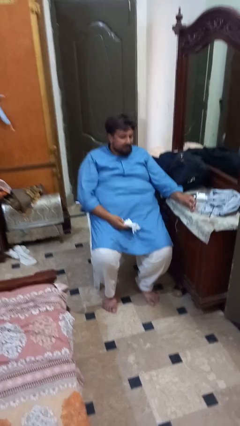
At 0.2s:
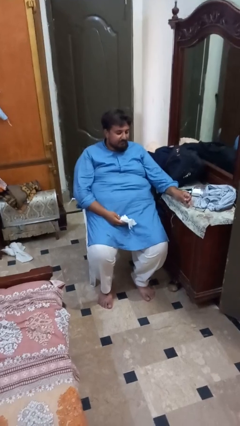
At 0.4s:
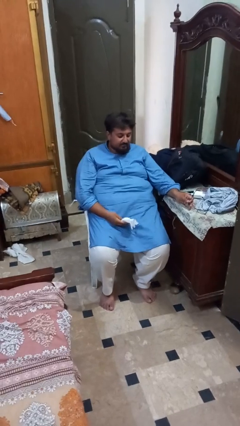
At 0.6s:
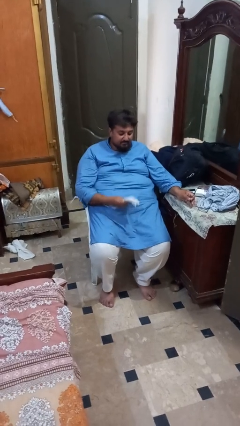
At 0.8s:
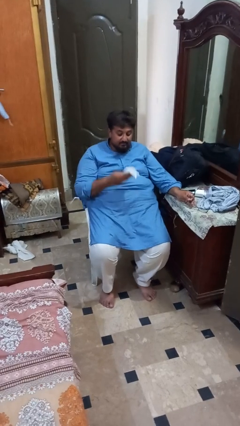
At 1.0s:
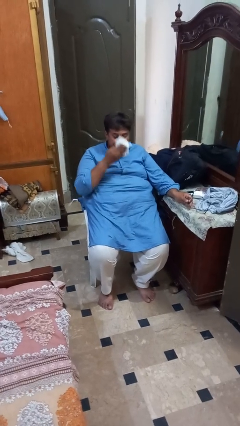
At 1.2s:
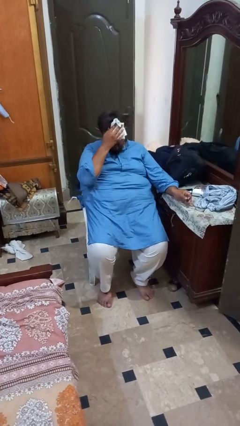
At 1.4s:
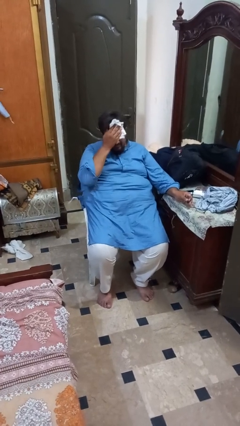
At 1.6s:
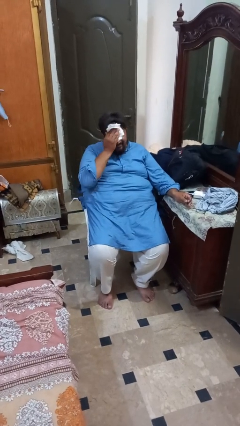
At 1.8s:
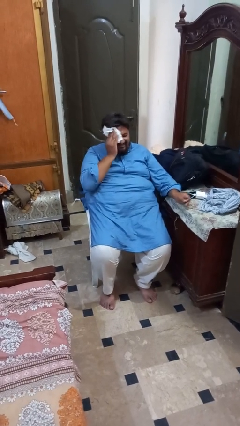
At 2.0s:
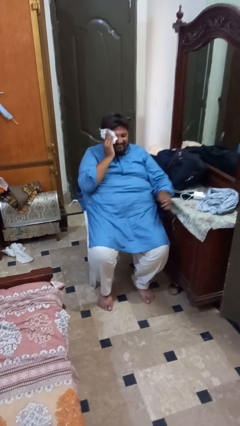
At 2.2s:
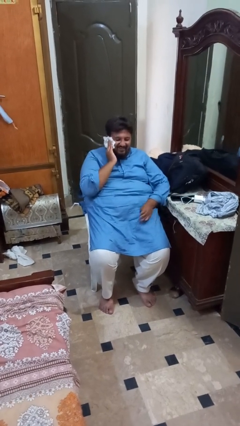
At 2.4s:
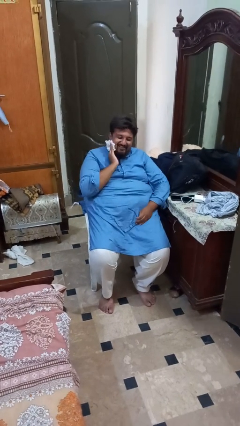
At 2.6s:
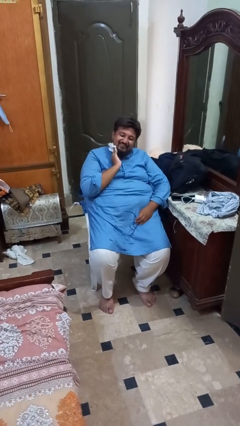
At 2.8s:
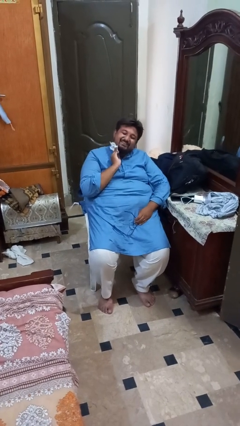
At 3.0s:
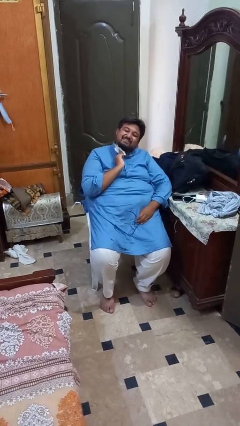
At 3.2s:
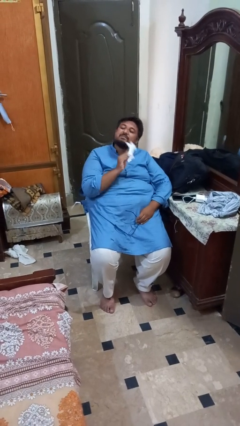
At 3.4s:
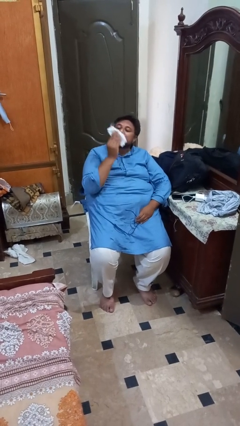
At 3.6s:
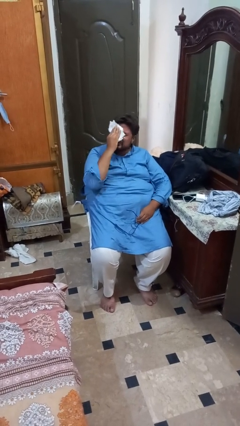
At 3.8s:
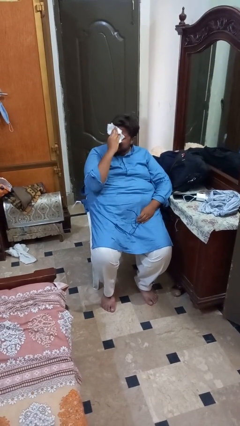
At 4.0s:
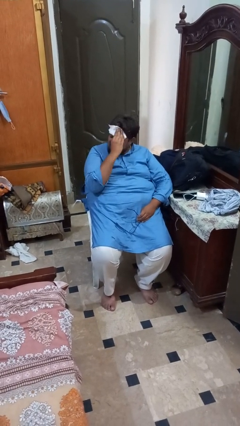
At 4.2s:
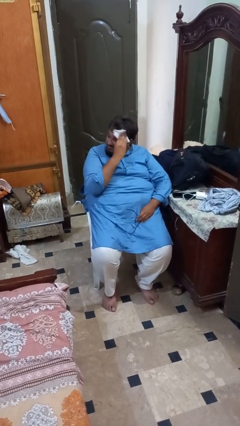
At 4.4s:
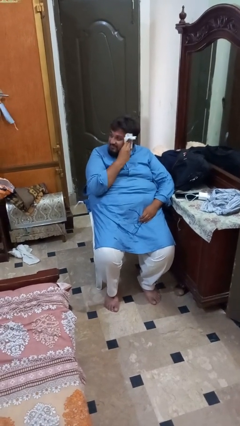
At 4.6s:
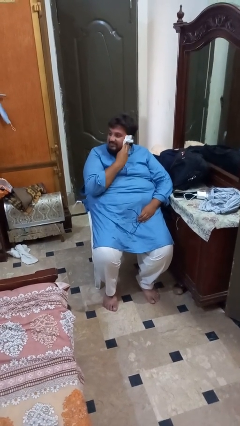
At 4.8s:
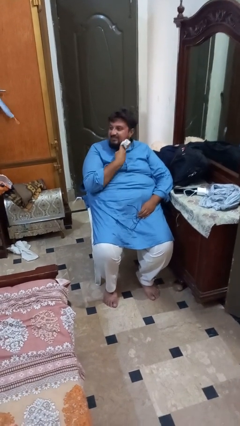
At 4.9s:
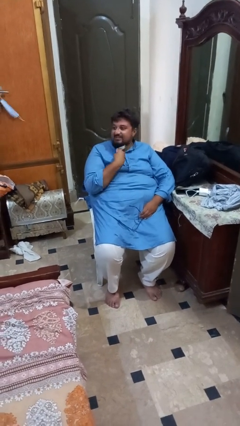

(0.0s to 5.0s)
person wipes mouth with napkin

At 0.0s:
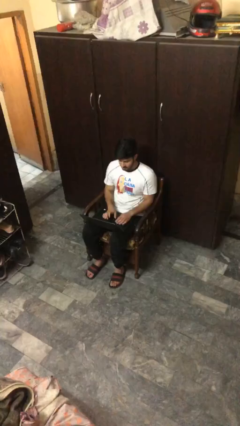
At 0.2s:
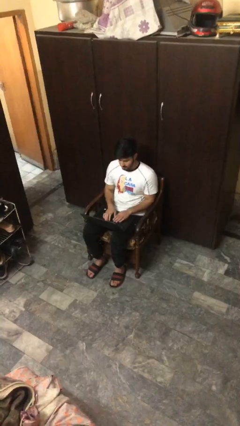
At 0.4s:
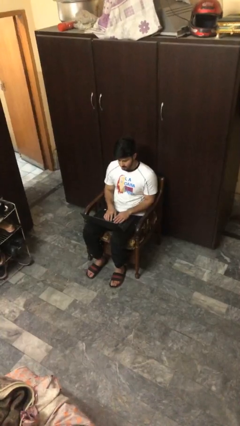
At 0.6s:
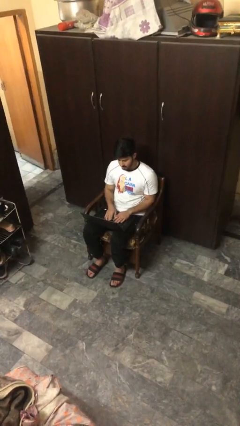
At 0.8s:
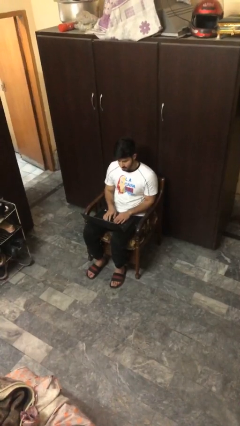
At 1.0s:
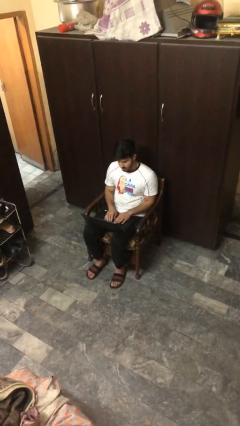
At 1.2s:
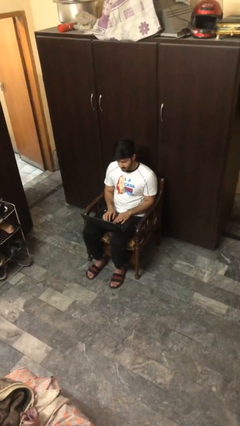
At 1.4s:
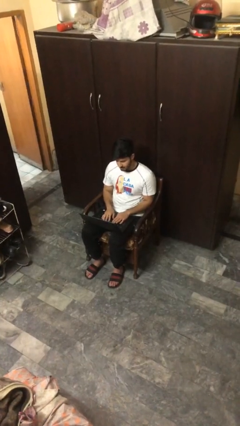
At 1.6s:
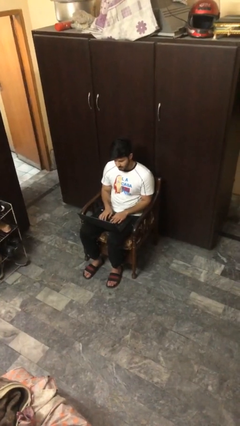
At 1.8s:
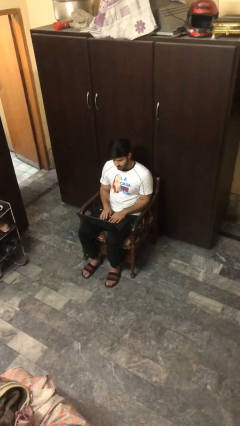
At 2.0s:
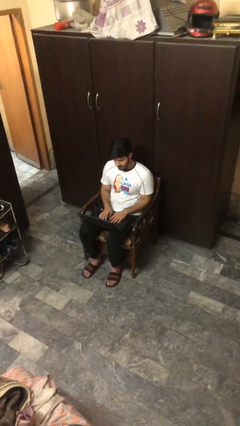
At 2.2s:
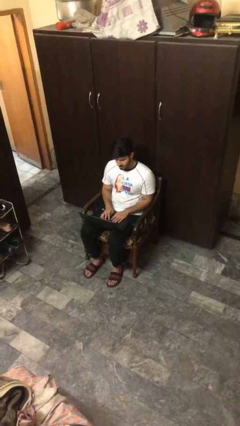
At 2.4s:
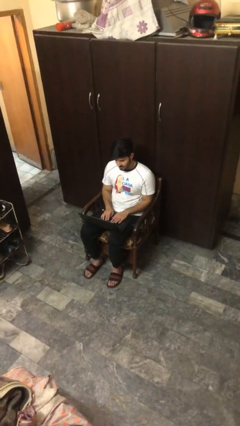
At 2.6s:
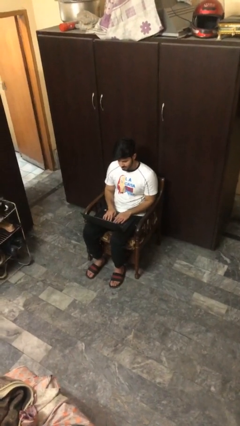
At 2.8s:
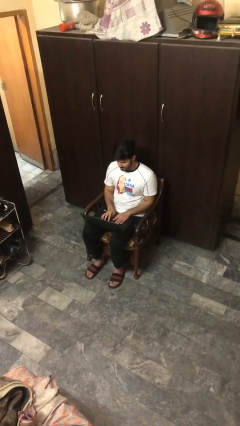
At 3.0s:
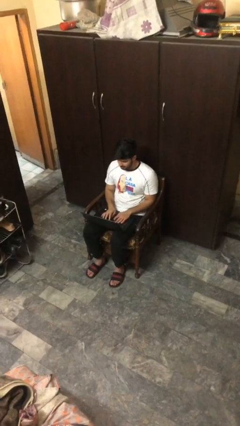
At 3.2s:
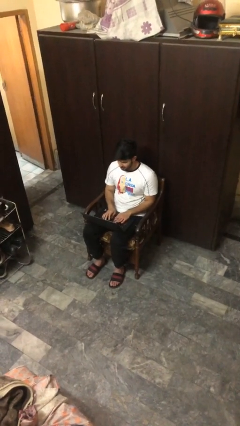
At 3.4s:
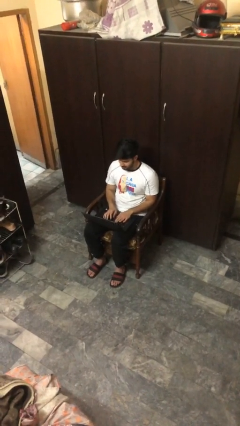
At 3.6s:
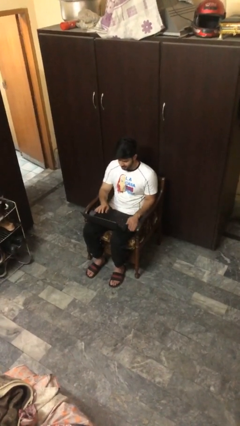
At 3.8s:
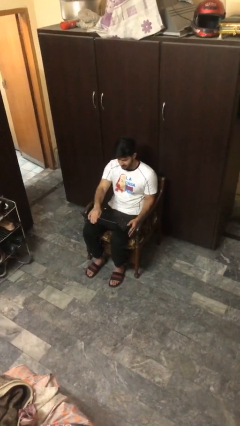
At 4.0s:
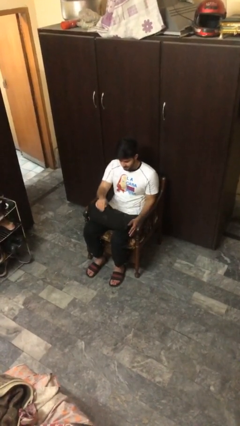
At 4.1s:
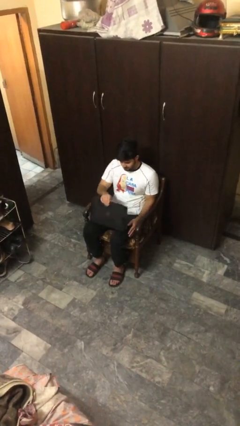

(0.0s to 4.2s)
person interacts with laptop

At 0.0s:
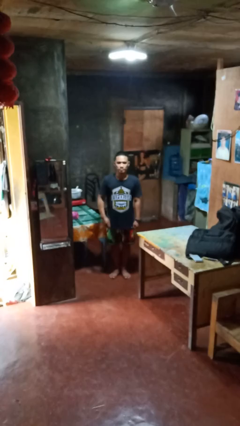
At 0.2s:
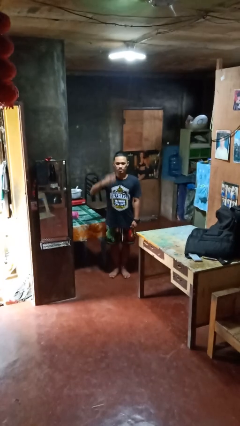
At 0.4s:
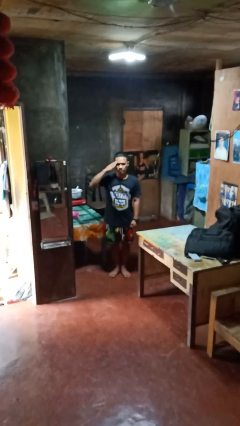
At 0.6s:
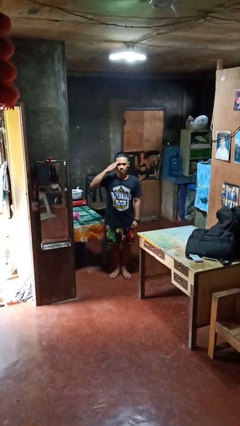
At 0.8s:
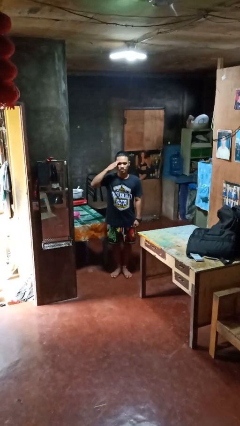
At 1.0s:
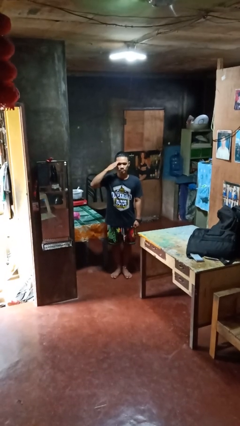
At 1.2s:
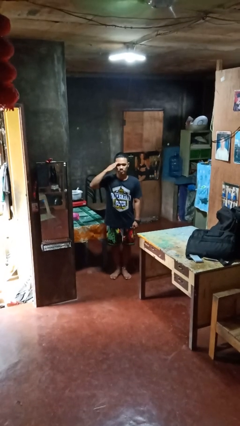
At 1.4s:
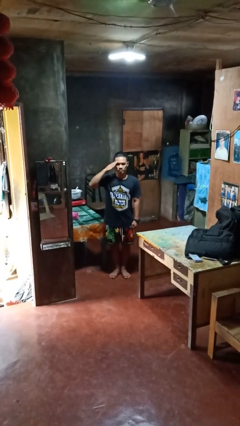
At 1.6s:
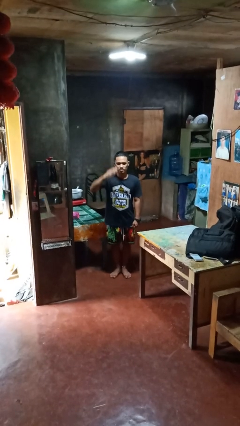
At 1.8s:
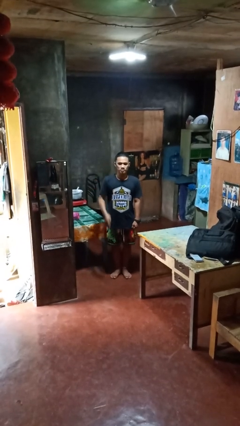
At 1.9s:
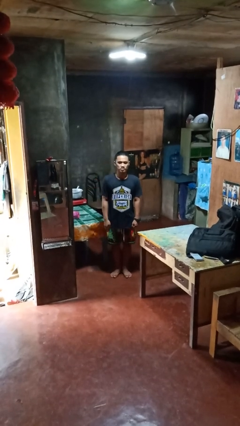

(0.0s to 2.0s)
person salutes

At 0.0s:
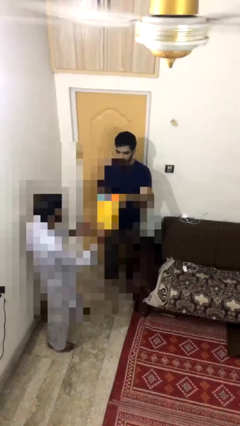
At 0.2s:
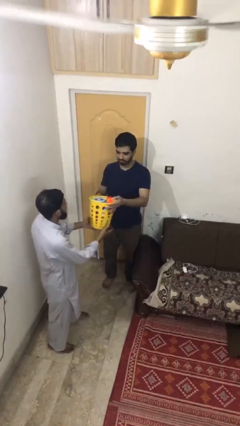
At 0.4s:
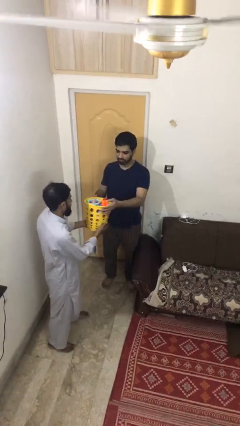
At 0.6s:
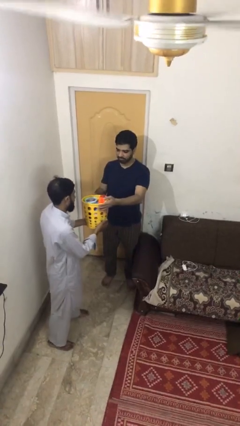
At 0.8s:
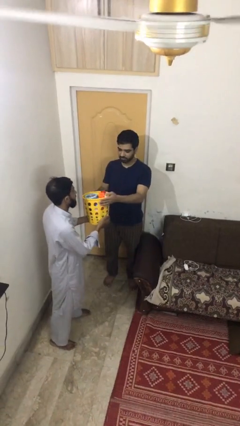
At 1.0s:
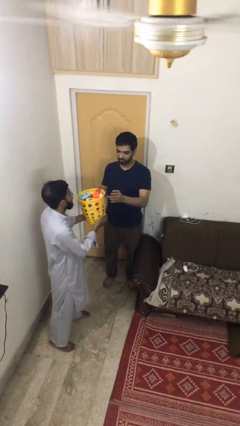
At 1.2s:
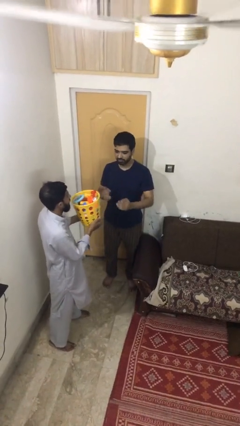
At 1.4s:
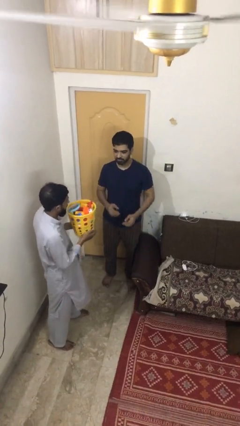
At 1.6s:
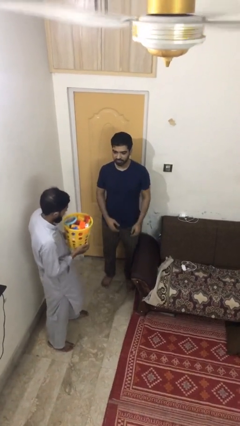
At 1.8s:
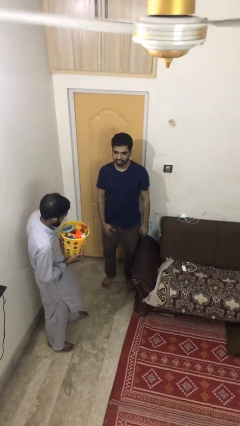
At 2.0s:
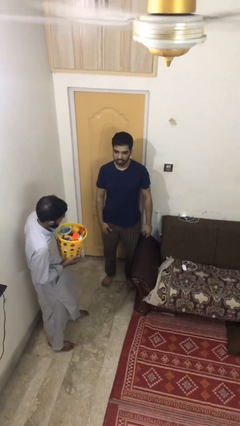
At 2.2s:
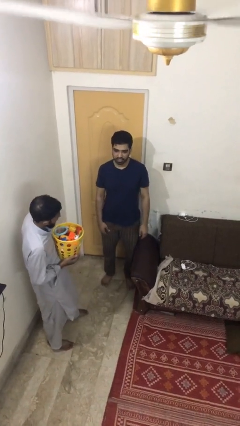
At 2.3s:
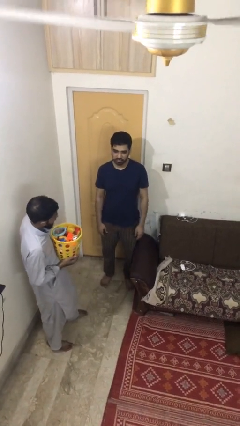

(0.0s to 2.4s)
person transfers object to person

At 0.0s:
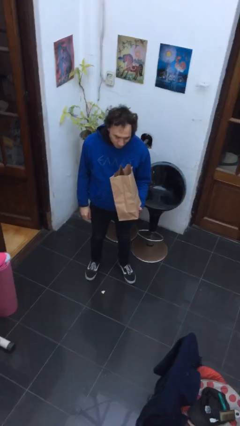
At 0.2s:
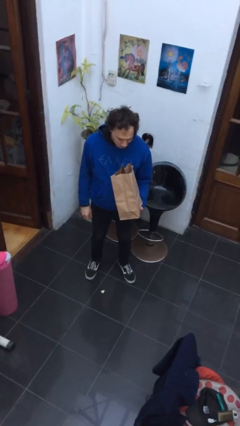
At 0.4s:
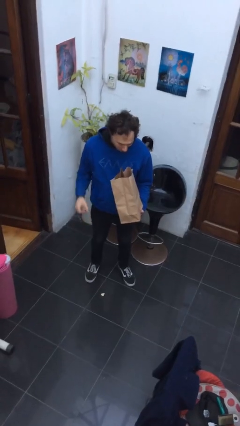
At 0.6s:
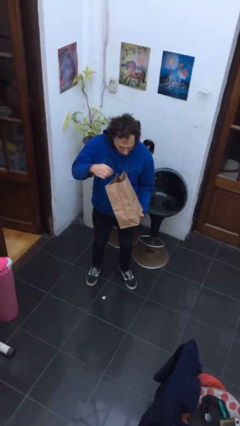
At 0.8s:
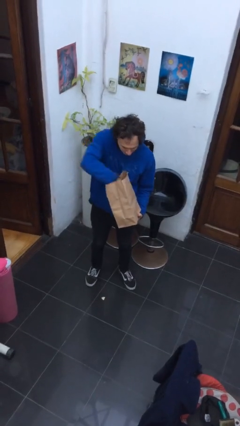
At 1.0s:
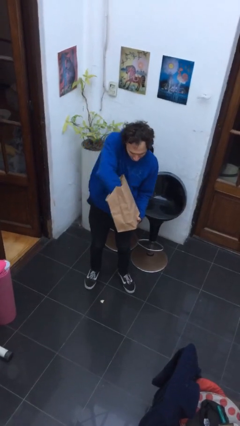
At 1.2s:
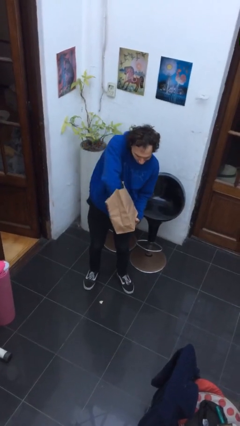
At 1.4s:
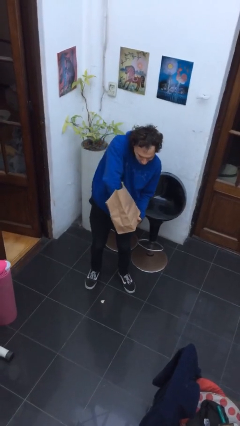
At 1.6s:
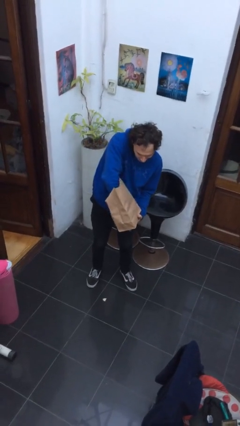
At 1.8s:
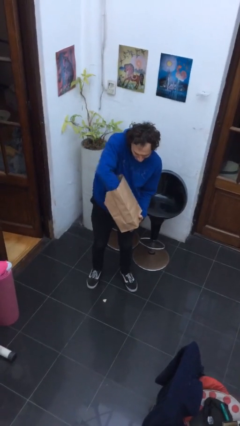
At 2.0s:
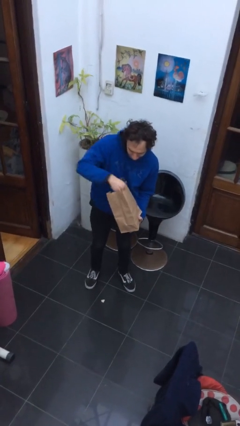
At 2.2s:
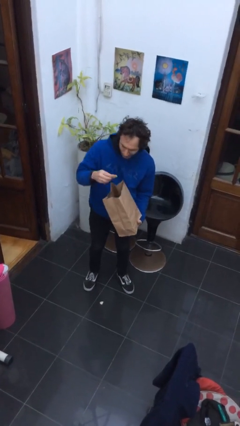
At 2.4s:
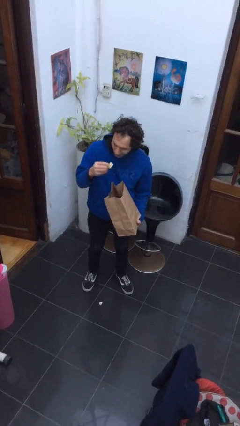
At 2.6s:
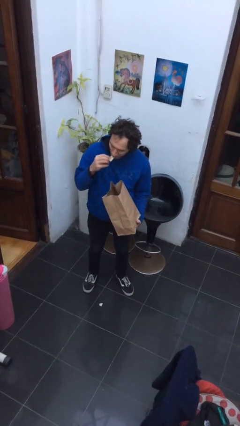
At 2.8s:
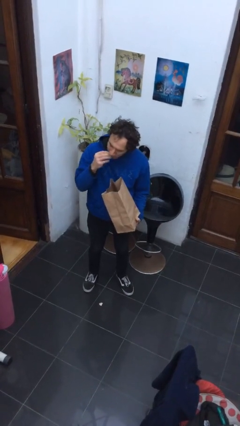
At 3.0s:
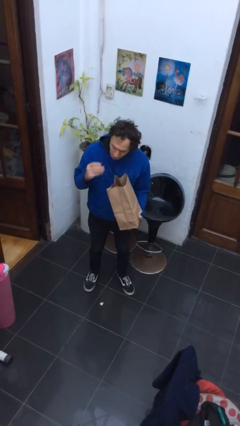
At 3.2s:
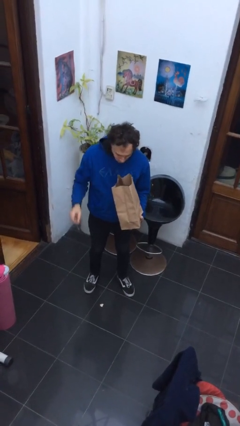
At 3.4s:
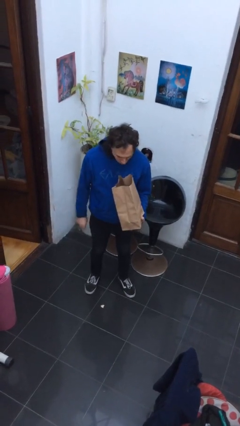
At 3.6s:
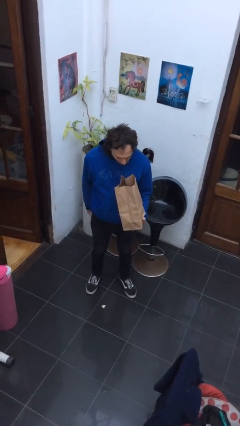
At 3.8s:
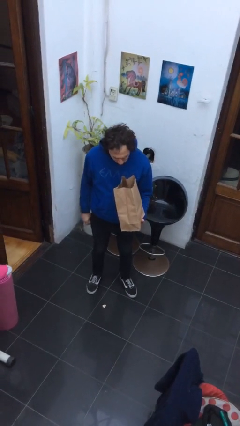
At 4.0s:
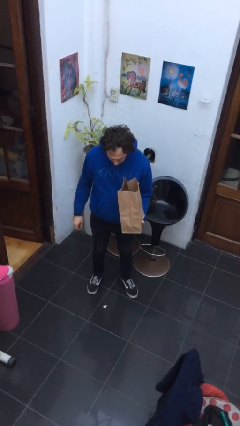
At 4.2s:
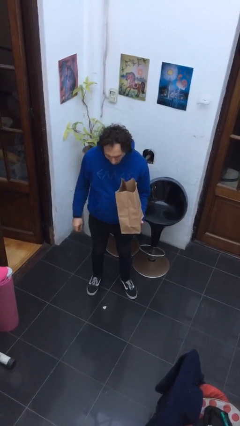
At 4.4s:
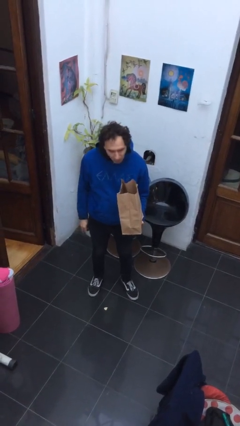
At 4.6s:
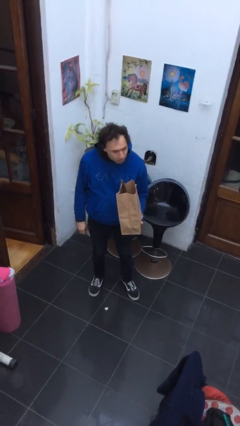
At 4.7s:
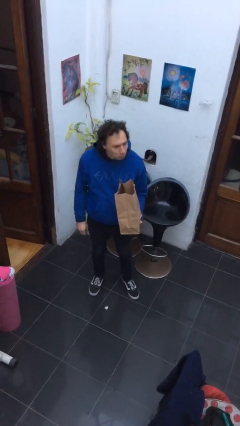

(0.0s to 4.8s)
person eats snack from bag
